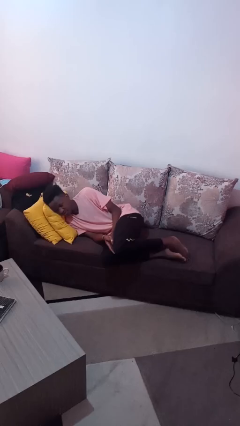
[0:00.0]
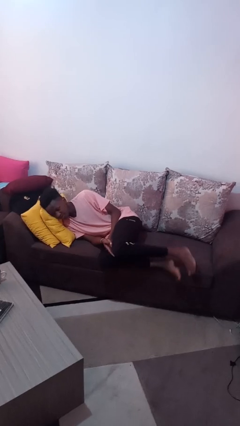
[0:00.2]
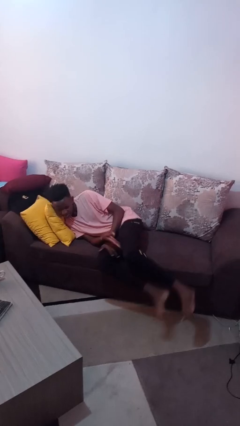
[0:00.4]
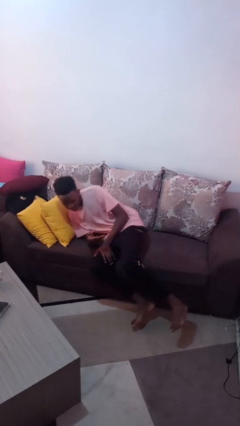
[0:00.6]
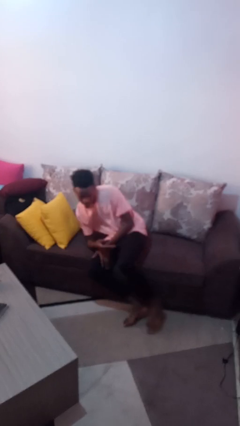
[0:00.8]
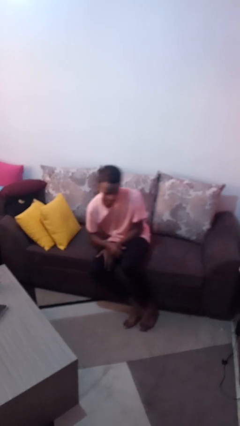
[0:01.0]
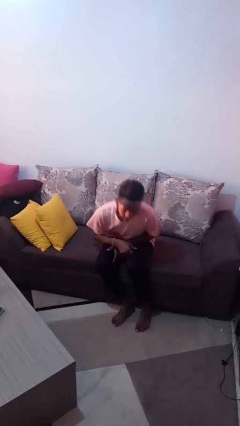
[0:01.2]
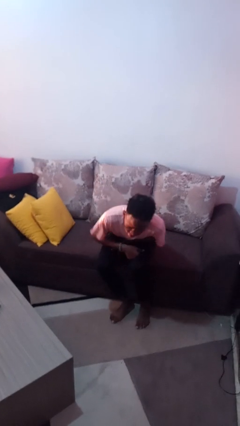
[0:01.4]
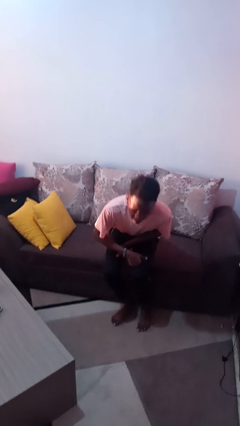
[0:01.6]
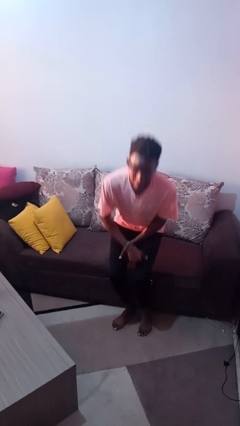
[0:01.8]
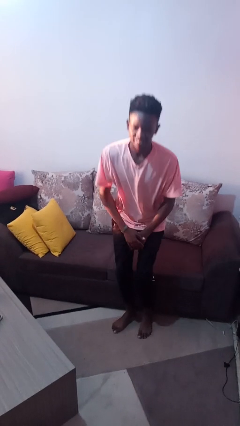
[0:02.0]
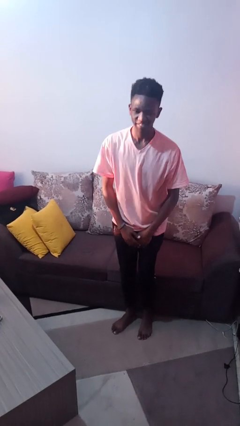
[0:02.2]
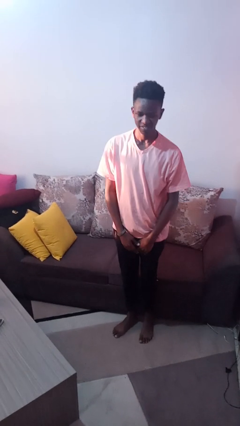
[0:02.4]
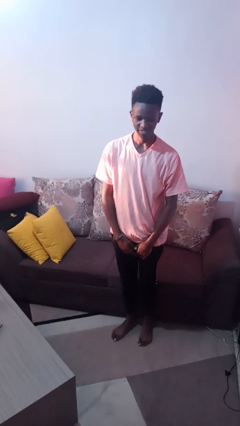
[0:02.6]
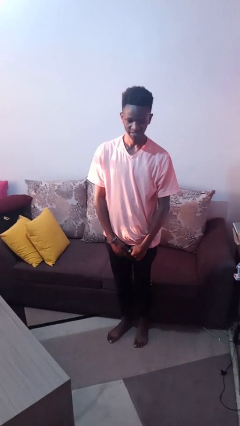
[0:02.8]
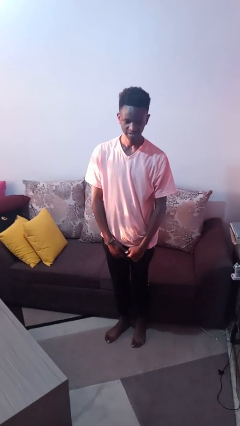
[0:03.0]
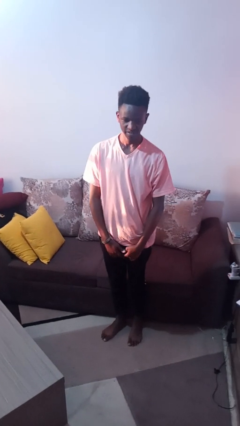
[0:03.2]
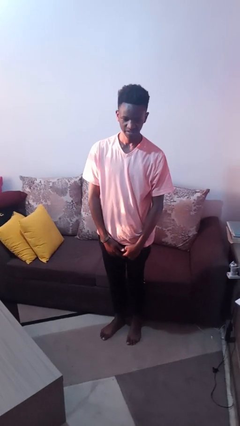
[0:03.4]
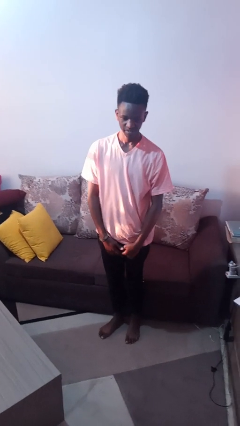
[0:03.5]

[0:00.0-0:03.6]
person stands up

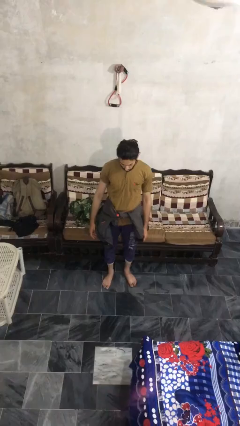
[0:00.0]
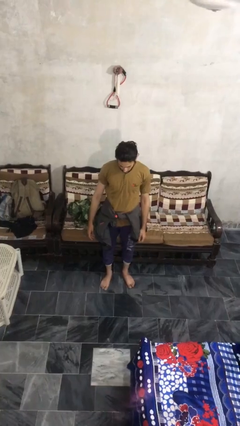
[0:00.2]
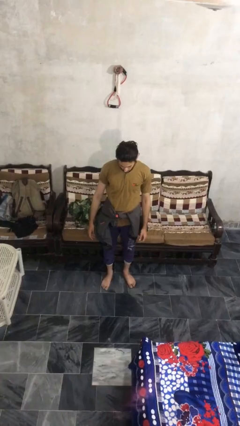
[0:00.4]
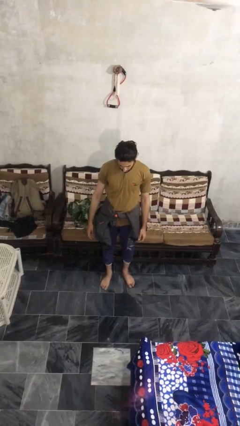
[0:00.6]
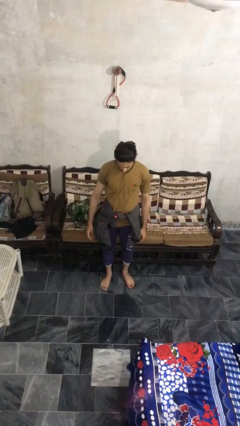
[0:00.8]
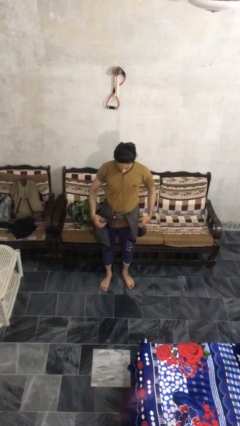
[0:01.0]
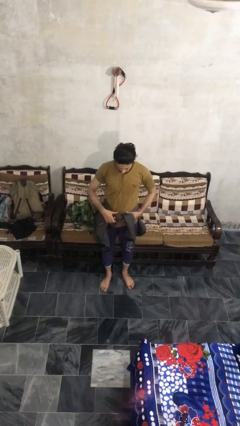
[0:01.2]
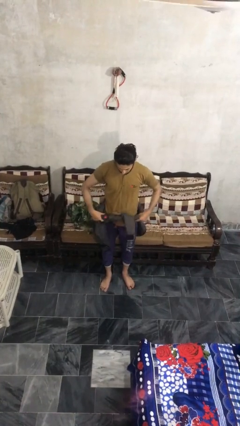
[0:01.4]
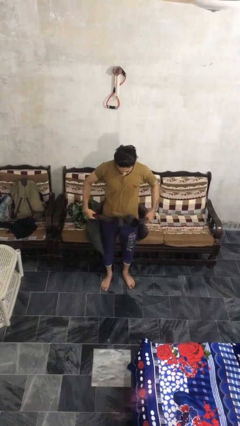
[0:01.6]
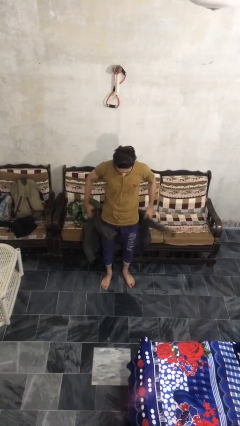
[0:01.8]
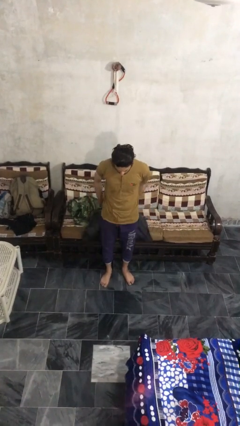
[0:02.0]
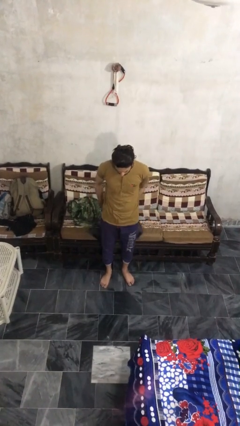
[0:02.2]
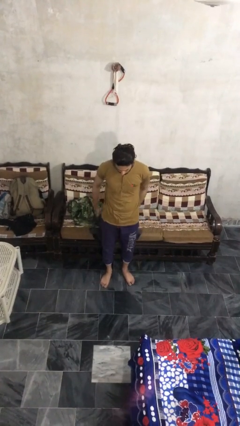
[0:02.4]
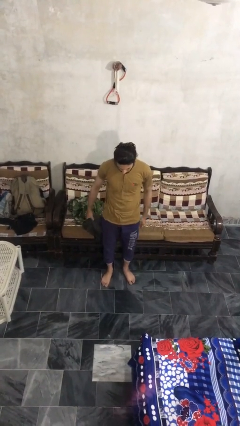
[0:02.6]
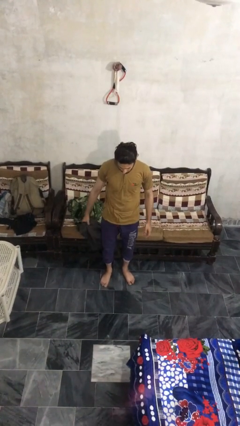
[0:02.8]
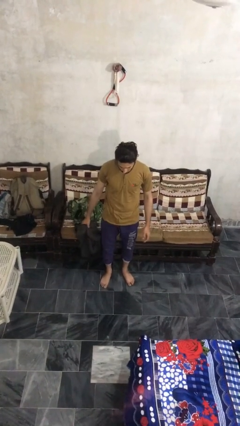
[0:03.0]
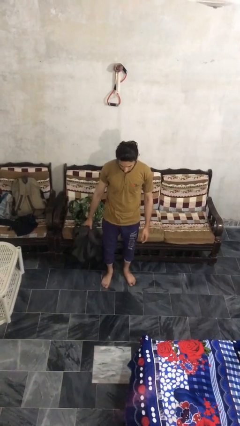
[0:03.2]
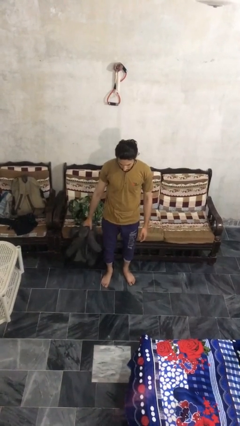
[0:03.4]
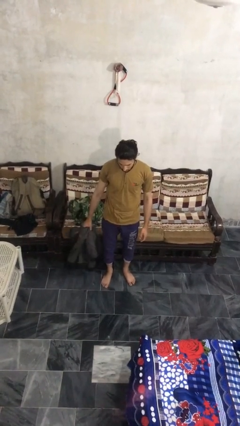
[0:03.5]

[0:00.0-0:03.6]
person unties jacket around waist

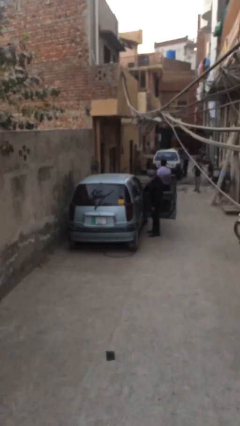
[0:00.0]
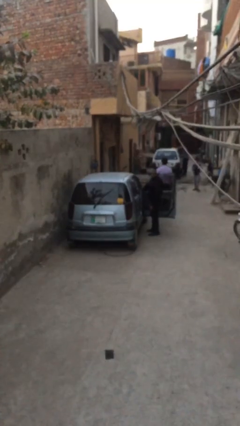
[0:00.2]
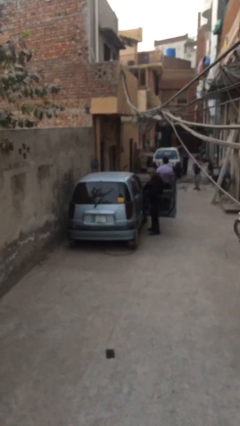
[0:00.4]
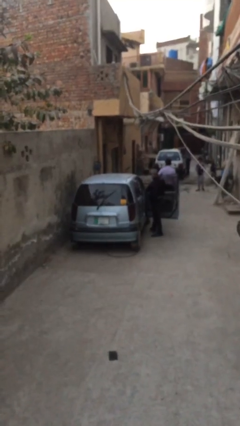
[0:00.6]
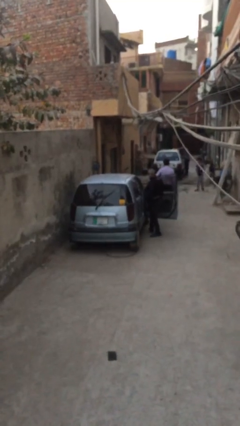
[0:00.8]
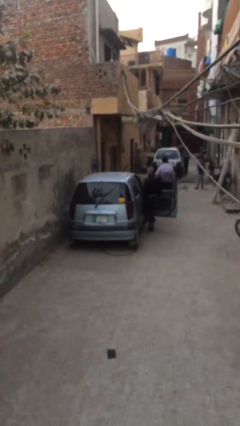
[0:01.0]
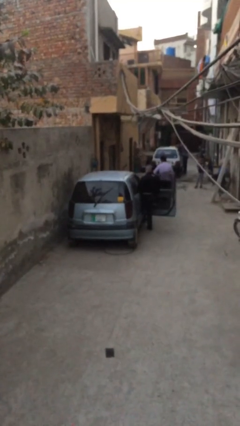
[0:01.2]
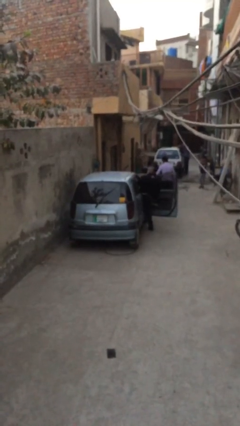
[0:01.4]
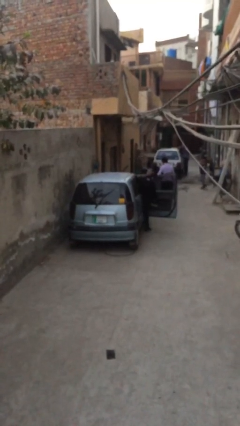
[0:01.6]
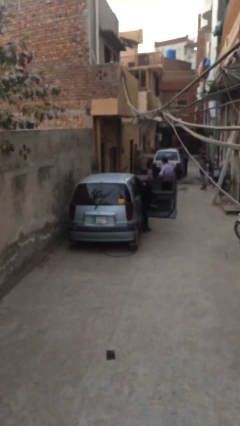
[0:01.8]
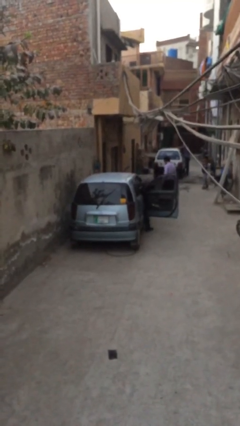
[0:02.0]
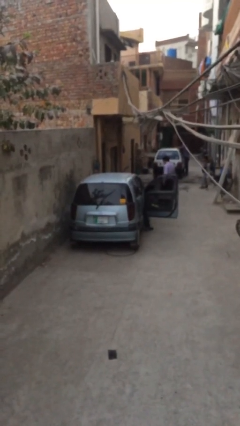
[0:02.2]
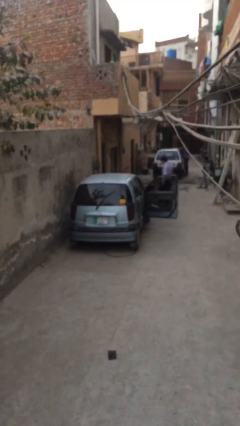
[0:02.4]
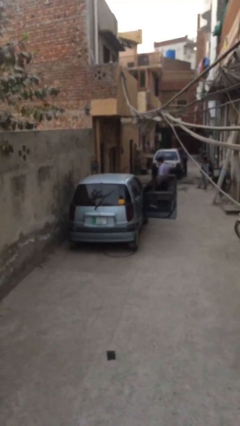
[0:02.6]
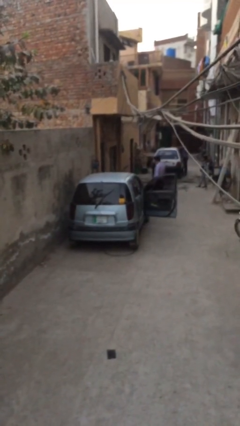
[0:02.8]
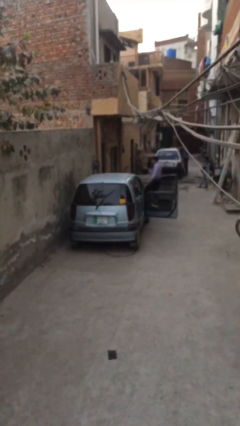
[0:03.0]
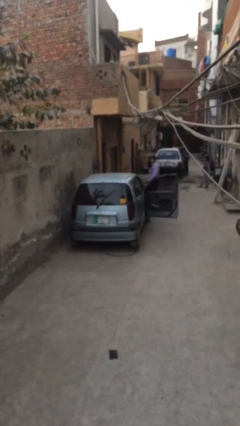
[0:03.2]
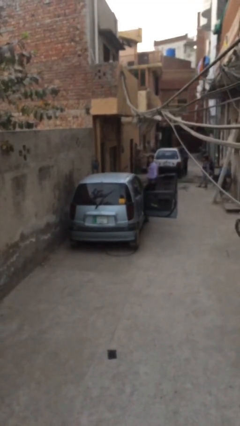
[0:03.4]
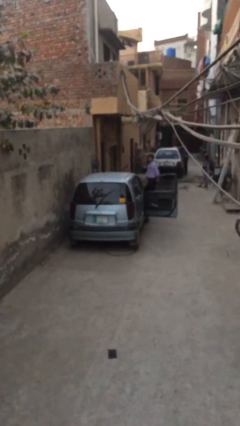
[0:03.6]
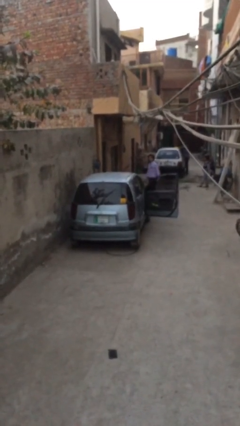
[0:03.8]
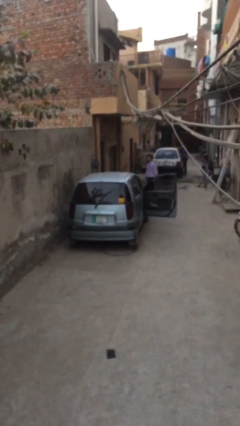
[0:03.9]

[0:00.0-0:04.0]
person enters car

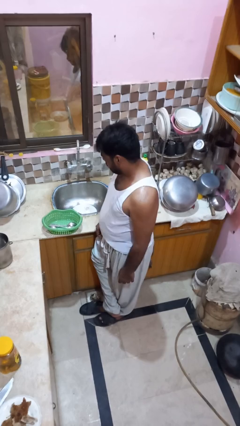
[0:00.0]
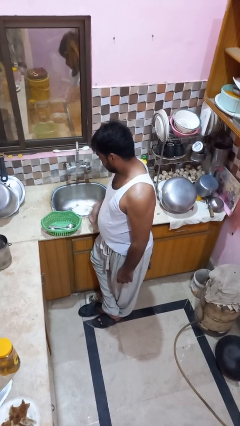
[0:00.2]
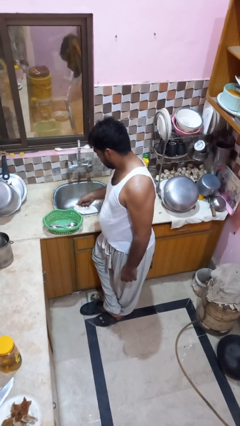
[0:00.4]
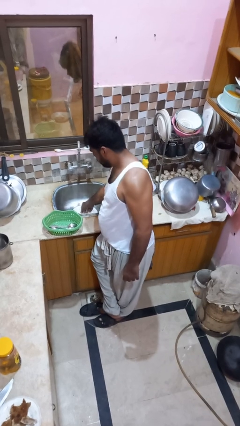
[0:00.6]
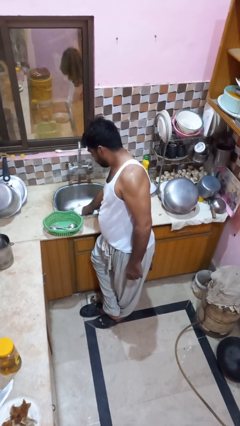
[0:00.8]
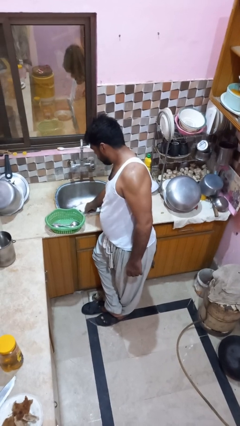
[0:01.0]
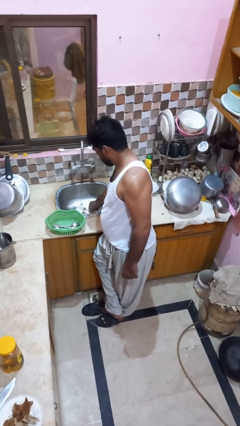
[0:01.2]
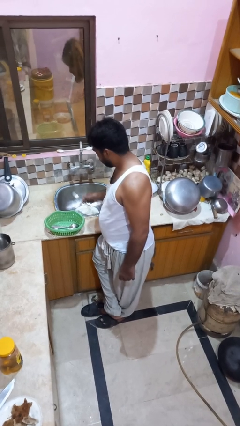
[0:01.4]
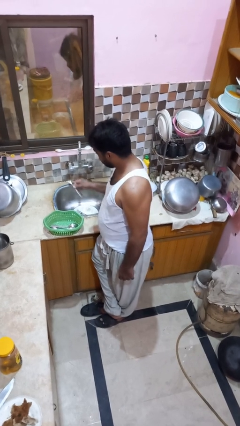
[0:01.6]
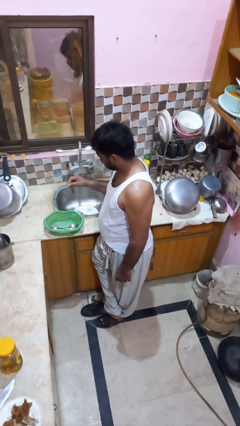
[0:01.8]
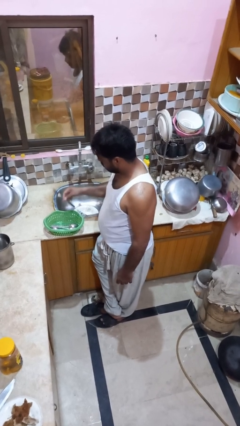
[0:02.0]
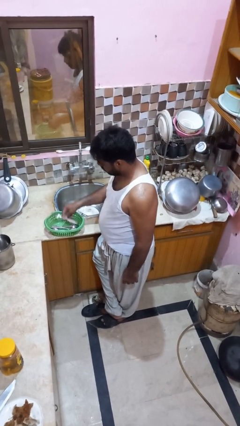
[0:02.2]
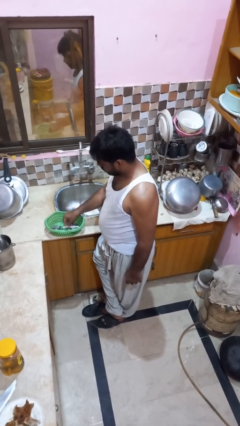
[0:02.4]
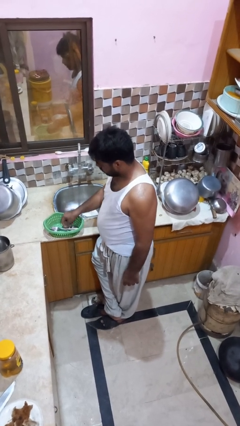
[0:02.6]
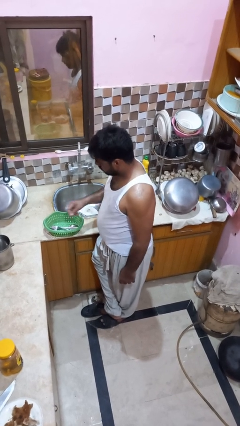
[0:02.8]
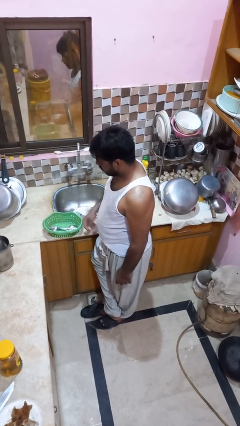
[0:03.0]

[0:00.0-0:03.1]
person loads dishwasher

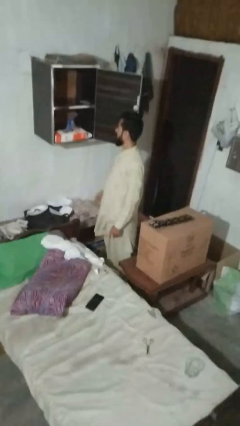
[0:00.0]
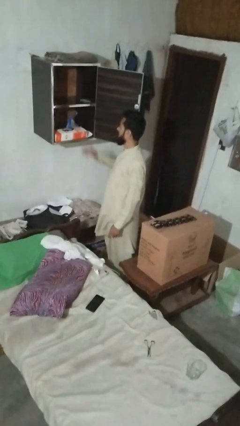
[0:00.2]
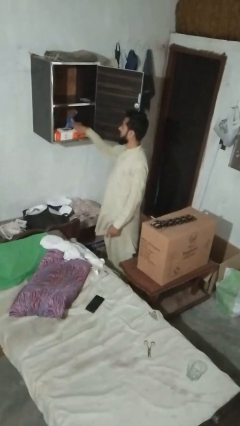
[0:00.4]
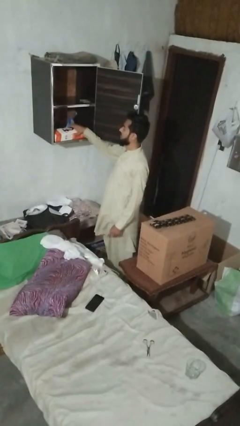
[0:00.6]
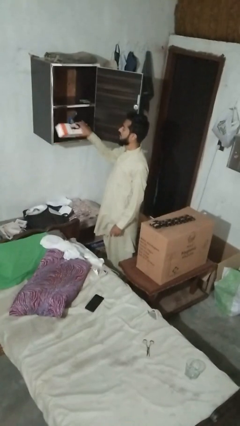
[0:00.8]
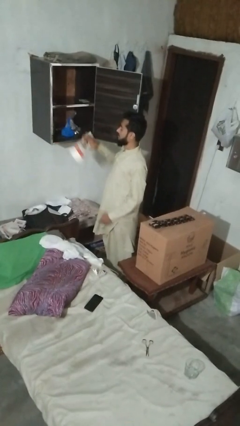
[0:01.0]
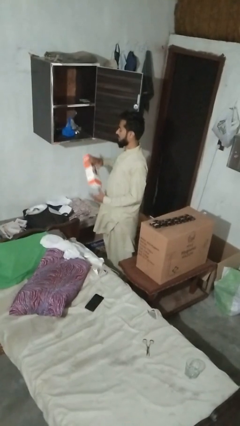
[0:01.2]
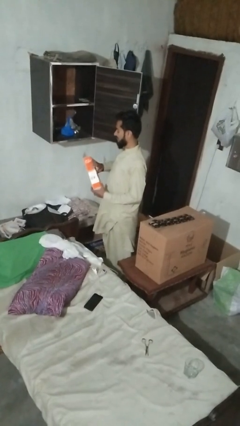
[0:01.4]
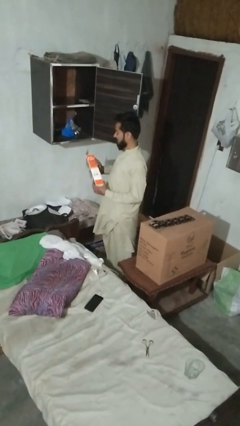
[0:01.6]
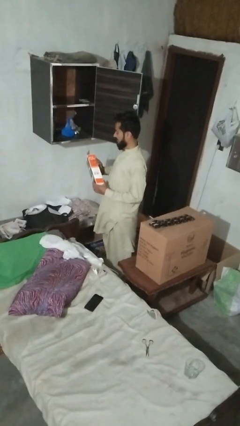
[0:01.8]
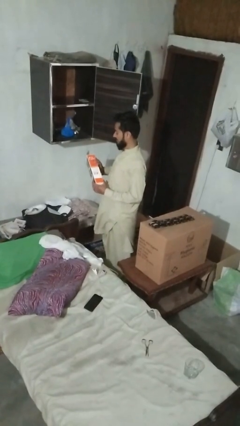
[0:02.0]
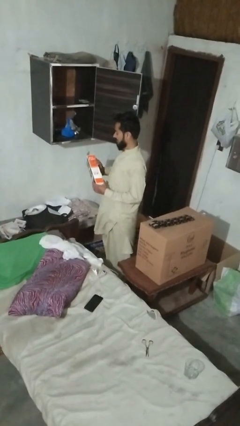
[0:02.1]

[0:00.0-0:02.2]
person picks up object from cabinet

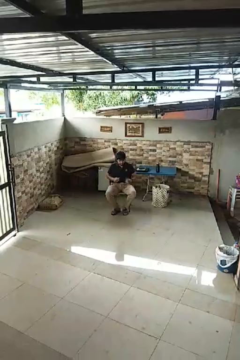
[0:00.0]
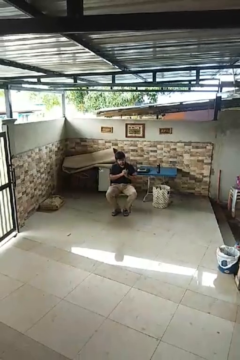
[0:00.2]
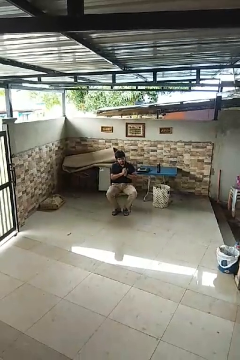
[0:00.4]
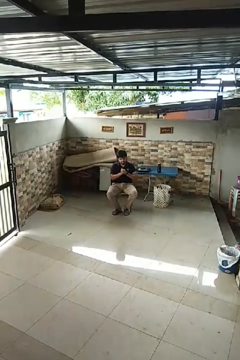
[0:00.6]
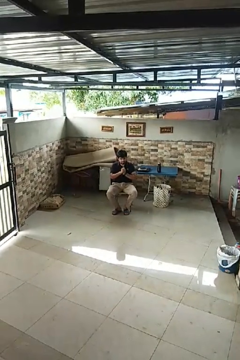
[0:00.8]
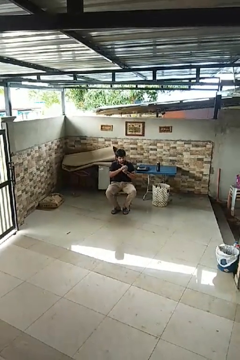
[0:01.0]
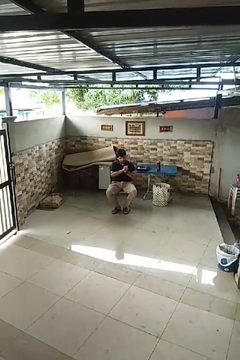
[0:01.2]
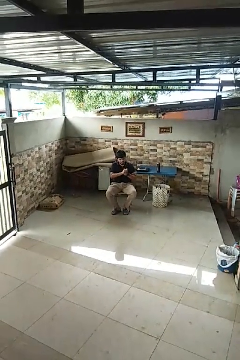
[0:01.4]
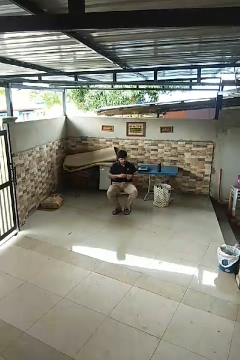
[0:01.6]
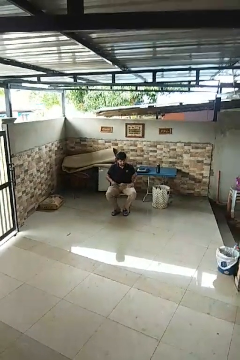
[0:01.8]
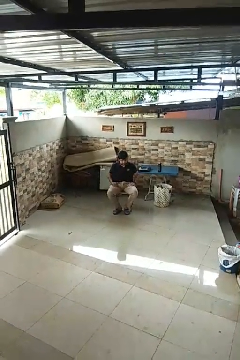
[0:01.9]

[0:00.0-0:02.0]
person cracks knuckles
